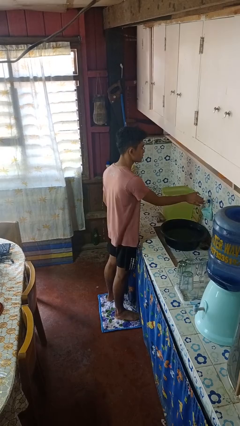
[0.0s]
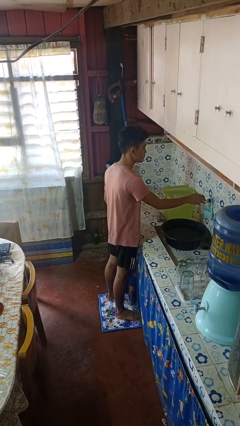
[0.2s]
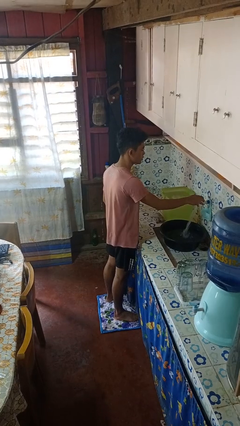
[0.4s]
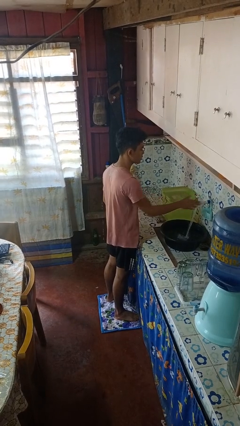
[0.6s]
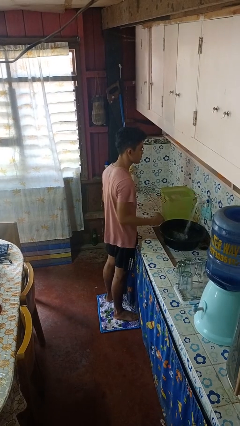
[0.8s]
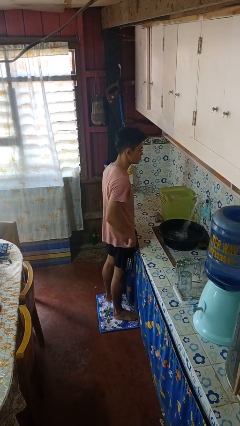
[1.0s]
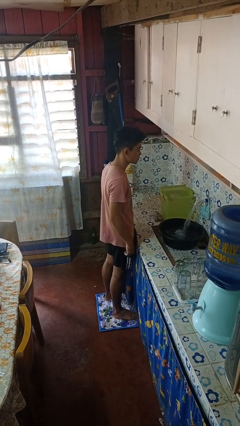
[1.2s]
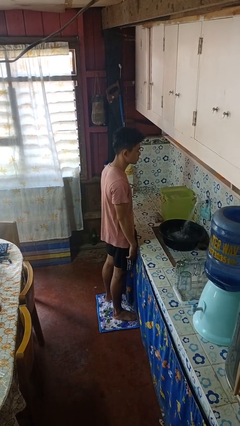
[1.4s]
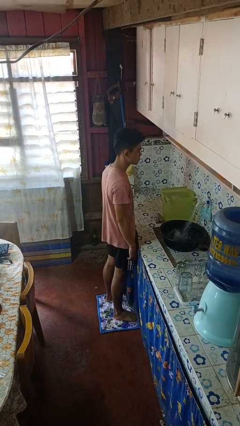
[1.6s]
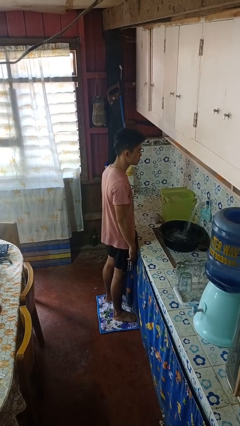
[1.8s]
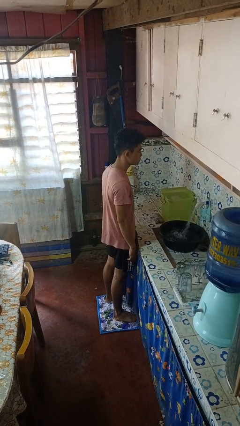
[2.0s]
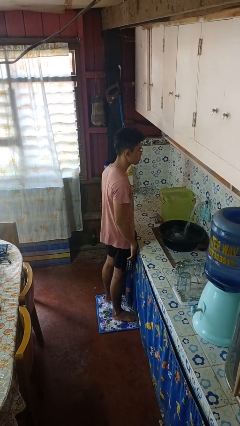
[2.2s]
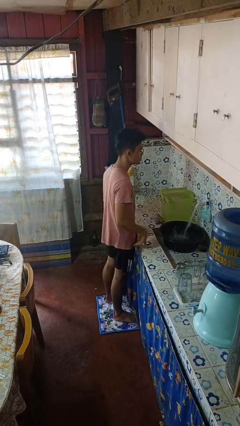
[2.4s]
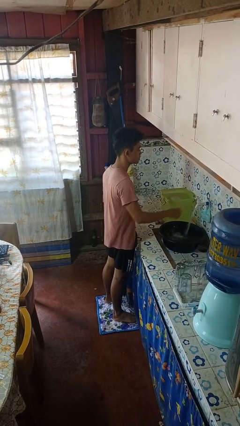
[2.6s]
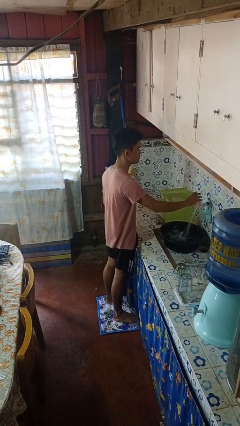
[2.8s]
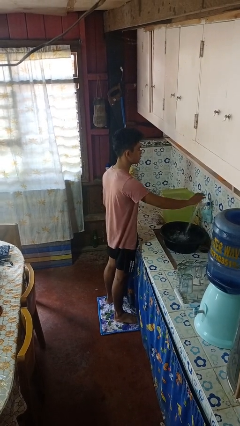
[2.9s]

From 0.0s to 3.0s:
person turns on faucet

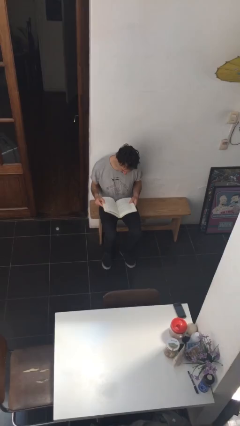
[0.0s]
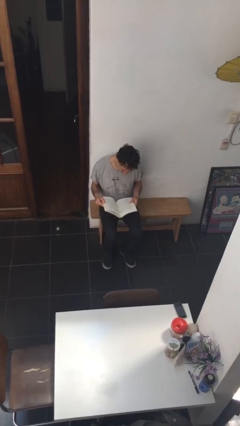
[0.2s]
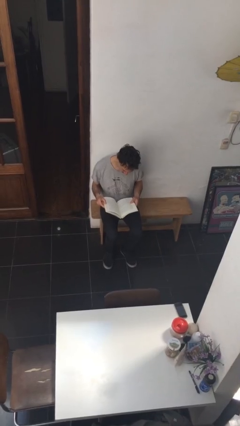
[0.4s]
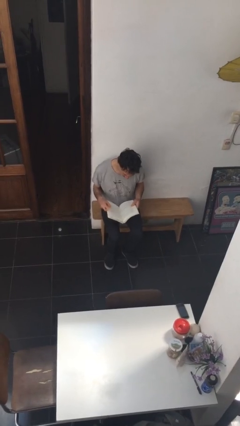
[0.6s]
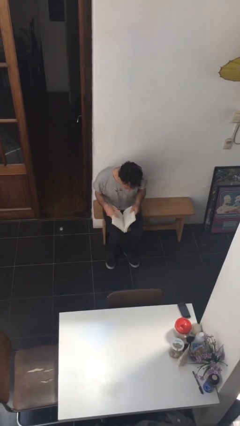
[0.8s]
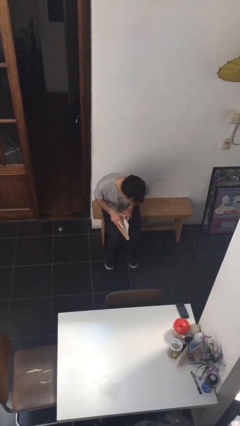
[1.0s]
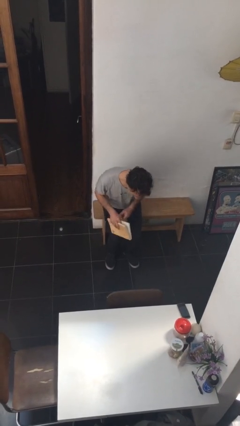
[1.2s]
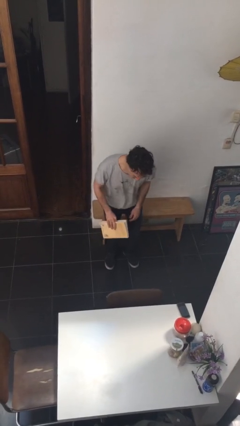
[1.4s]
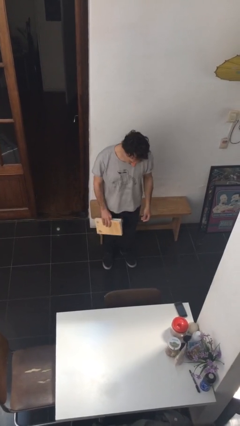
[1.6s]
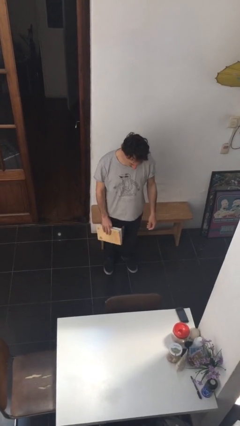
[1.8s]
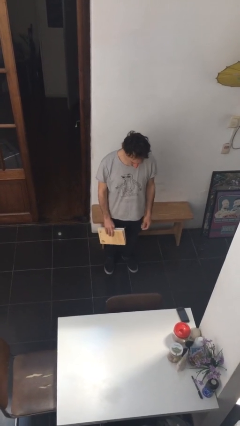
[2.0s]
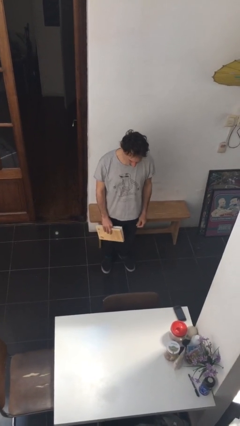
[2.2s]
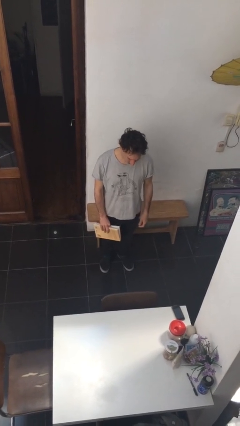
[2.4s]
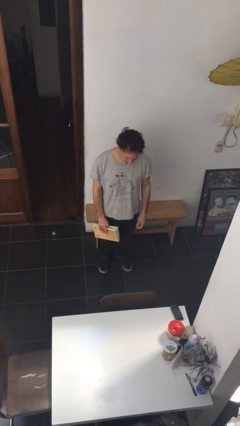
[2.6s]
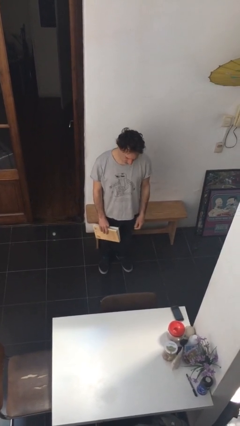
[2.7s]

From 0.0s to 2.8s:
person stands up

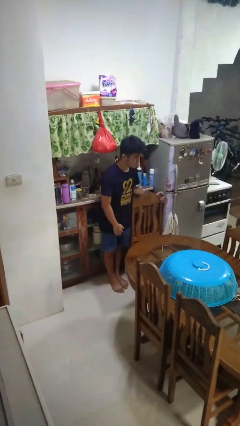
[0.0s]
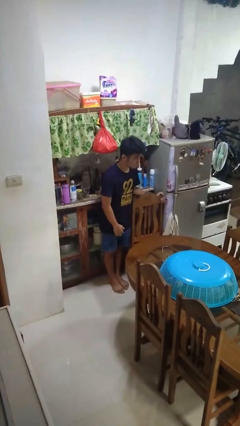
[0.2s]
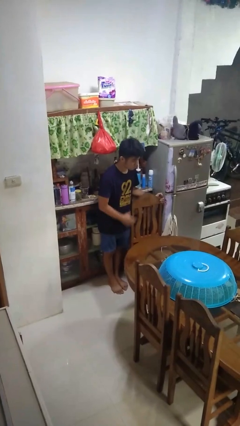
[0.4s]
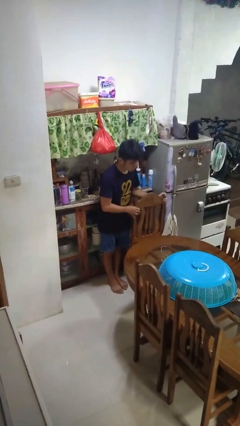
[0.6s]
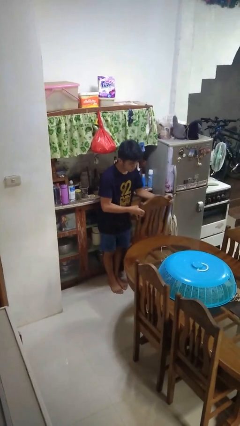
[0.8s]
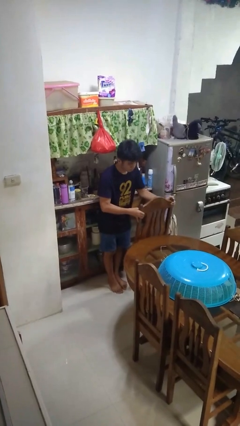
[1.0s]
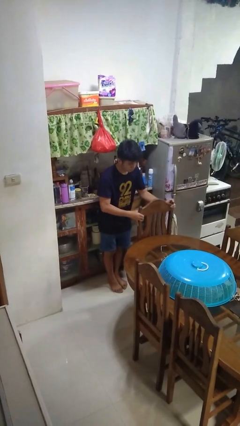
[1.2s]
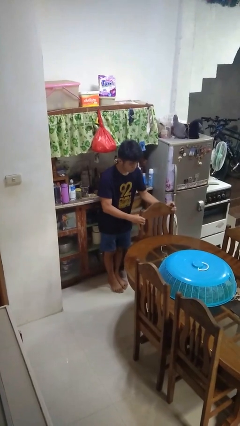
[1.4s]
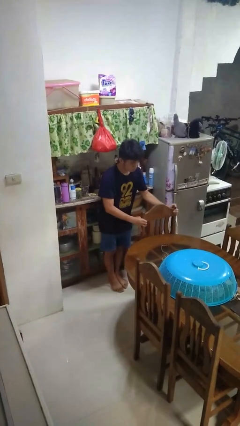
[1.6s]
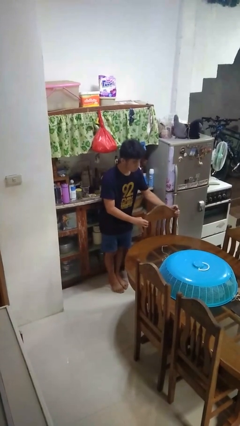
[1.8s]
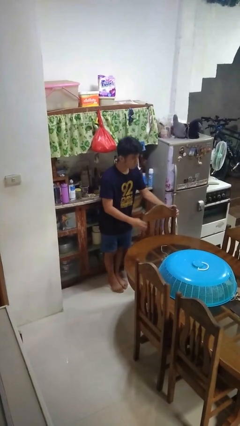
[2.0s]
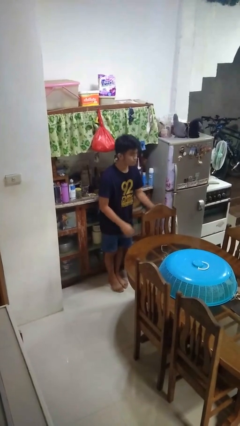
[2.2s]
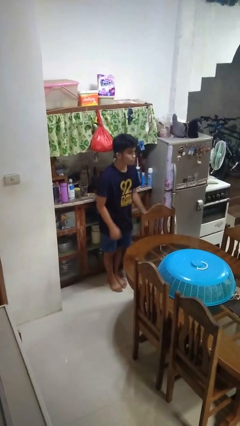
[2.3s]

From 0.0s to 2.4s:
person pushes in chair

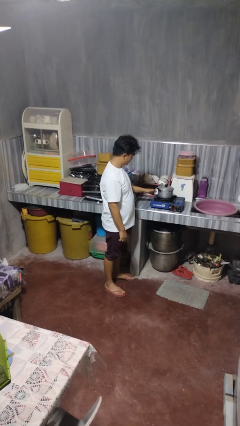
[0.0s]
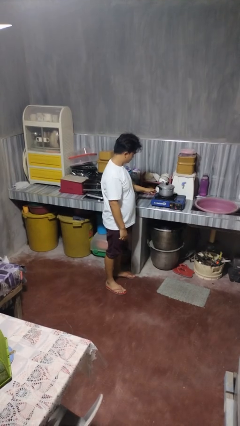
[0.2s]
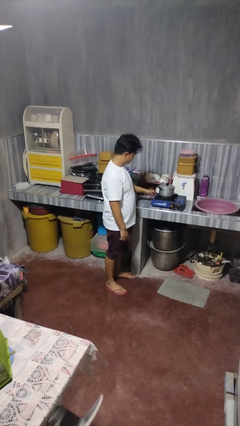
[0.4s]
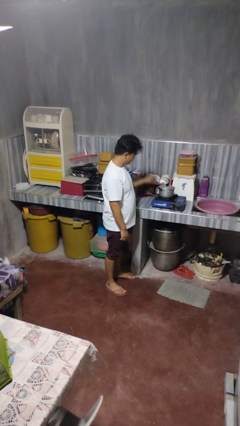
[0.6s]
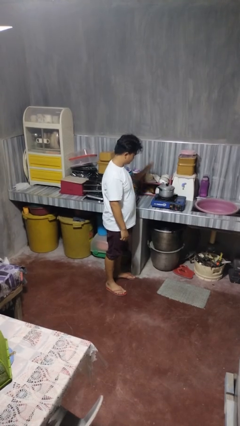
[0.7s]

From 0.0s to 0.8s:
person burns hand

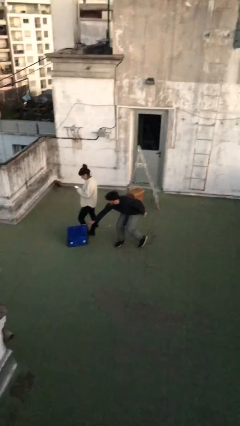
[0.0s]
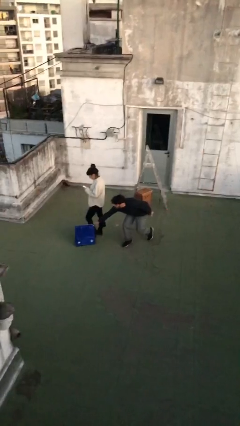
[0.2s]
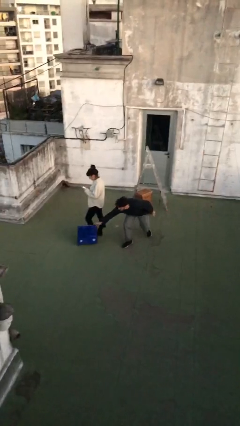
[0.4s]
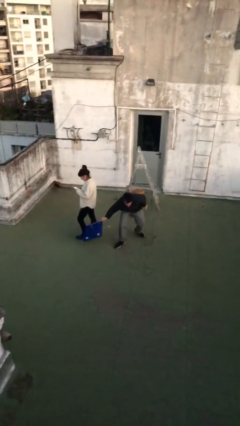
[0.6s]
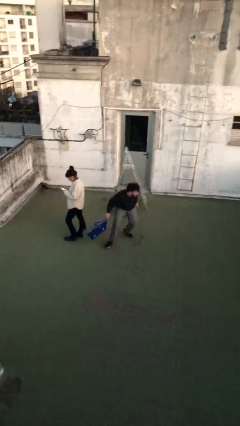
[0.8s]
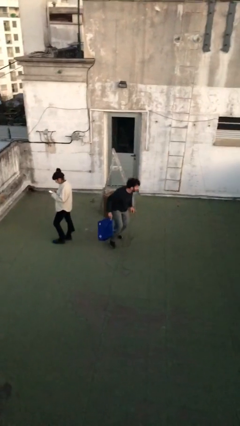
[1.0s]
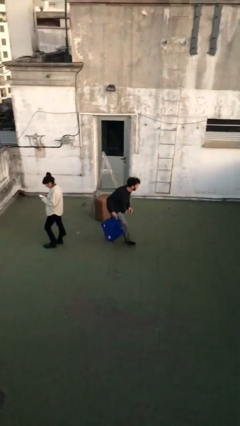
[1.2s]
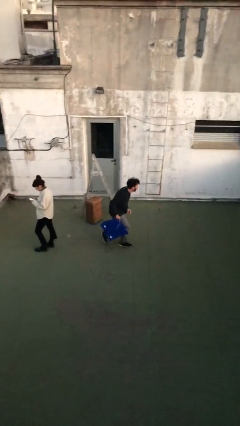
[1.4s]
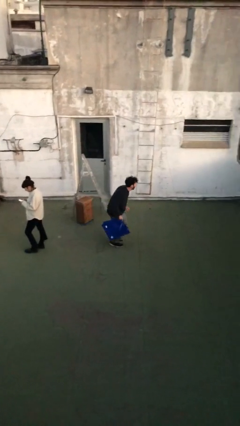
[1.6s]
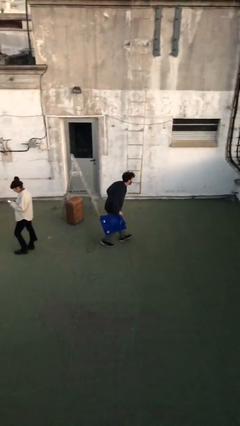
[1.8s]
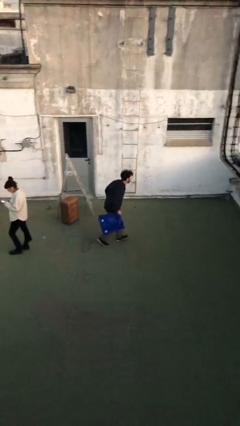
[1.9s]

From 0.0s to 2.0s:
person steals object from person

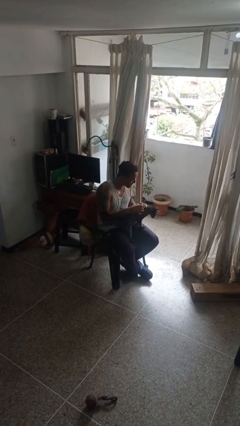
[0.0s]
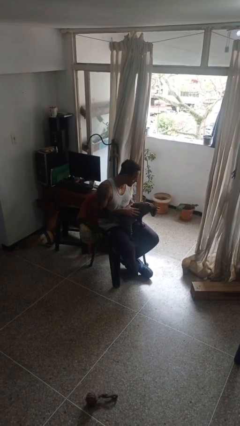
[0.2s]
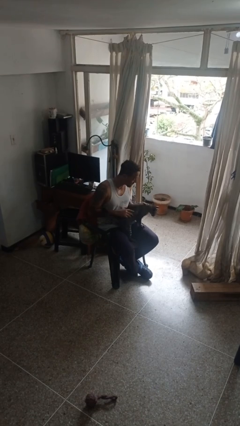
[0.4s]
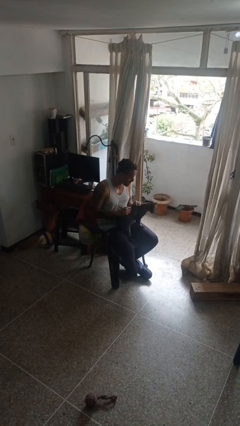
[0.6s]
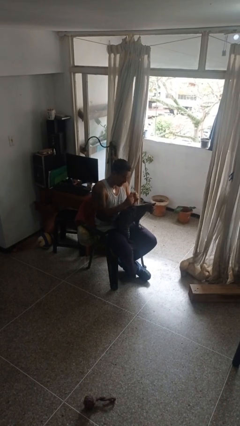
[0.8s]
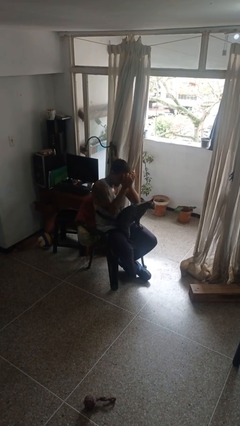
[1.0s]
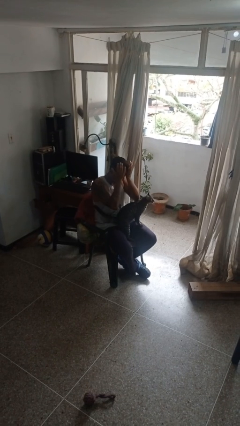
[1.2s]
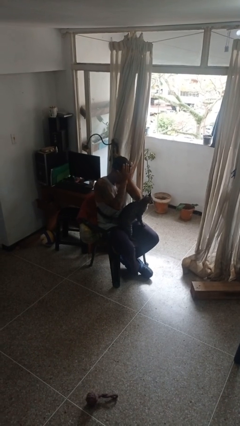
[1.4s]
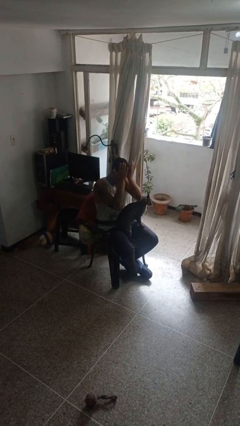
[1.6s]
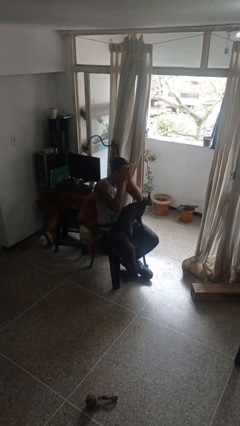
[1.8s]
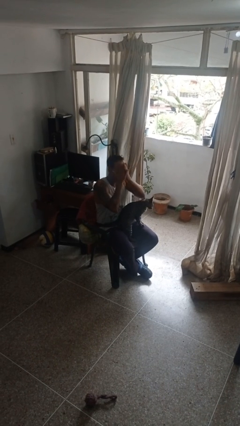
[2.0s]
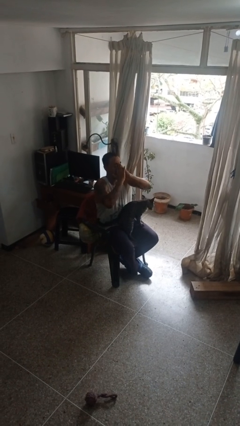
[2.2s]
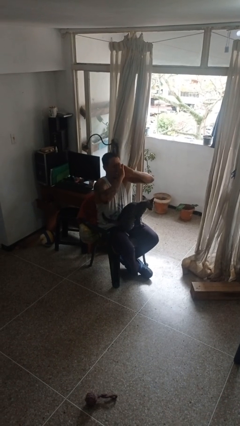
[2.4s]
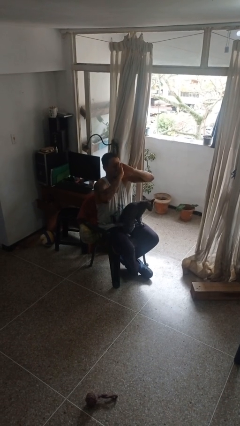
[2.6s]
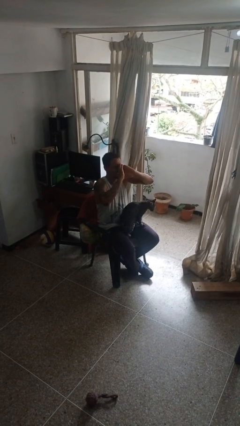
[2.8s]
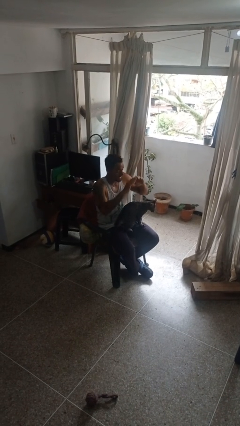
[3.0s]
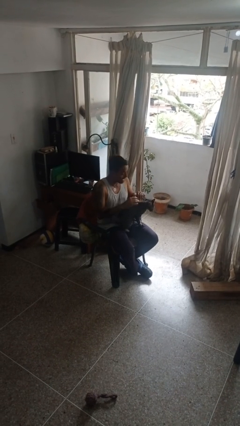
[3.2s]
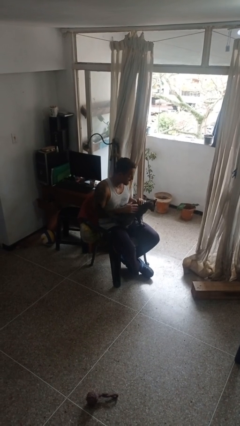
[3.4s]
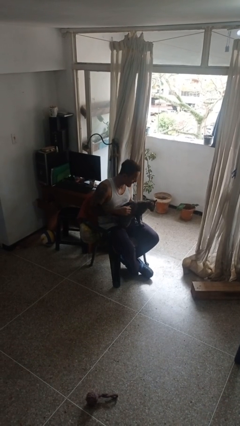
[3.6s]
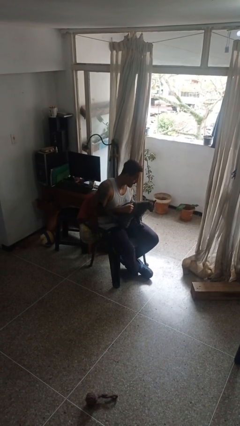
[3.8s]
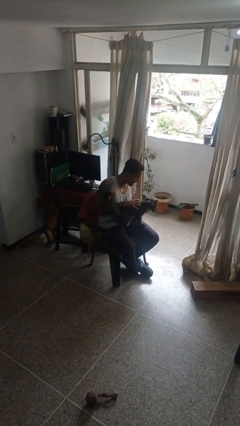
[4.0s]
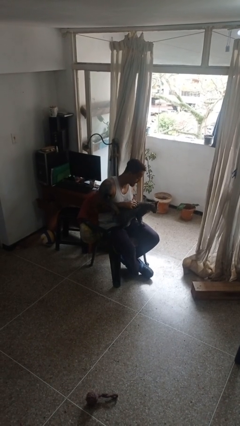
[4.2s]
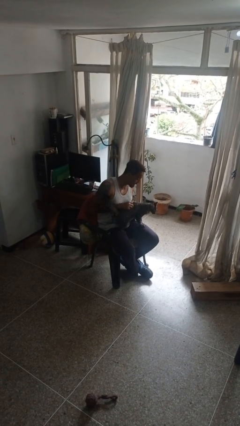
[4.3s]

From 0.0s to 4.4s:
person rubs eyes

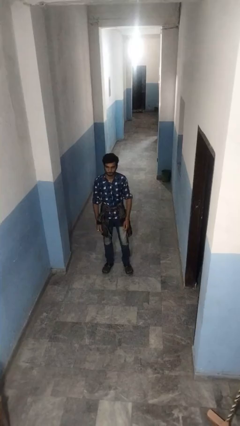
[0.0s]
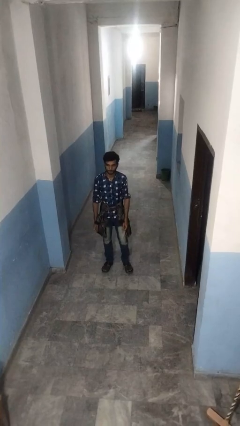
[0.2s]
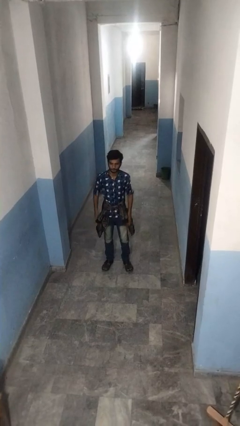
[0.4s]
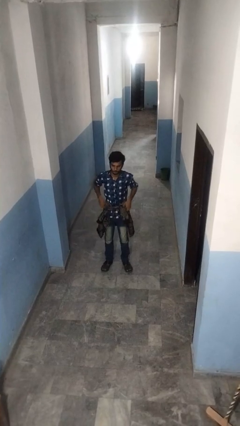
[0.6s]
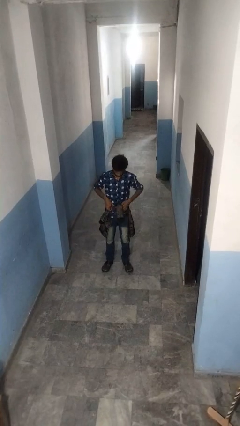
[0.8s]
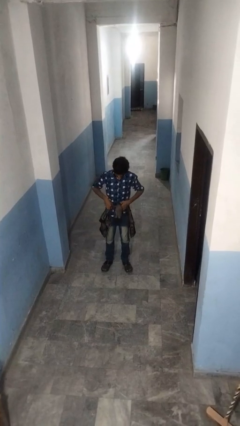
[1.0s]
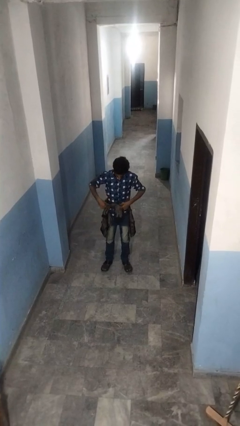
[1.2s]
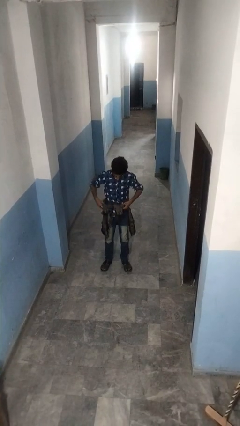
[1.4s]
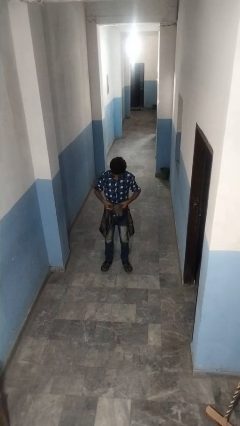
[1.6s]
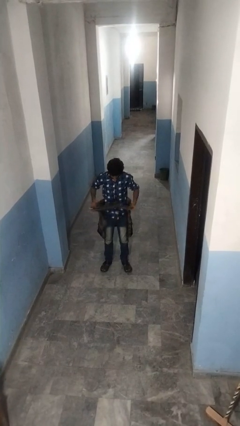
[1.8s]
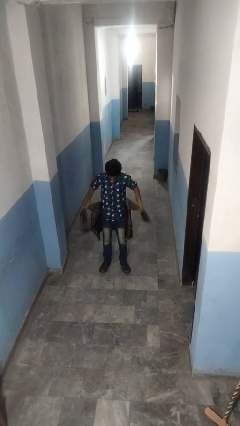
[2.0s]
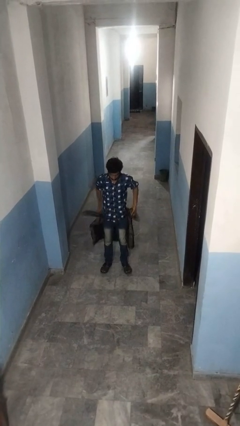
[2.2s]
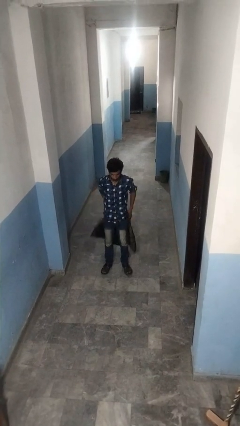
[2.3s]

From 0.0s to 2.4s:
person unties jacket around waist
